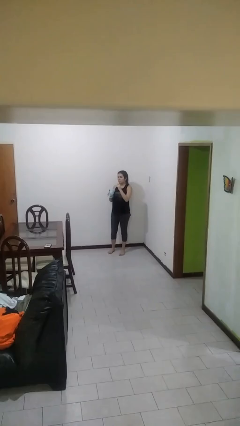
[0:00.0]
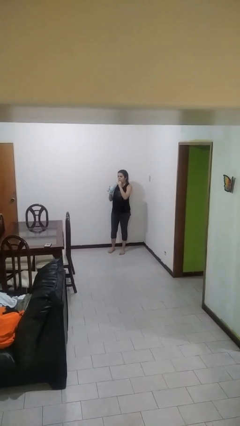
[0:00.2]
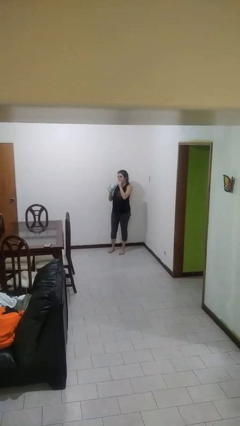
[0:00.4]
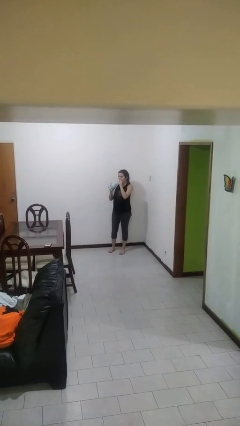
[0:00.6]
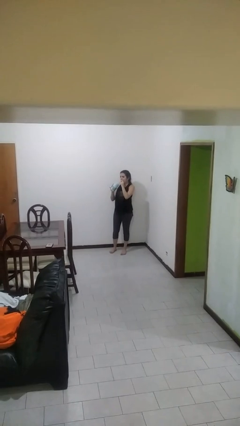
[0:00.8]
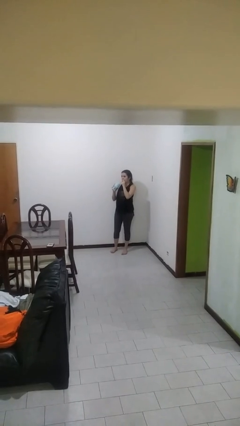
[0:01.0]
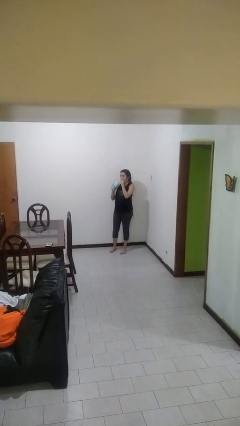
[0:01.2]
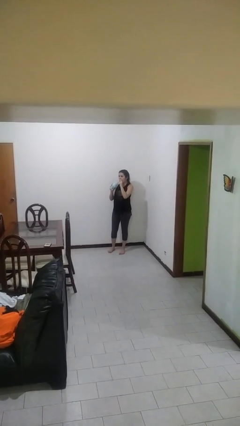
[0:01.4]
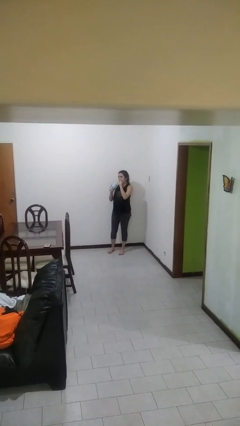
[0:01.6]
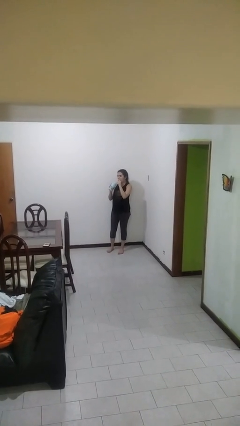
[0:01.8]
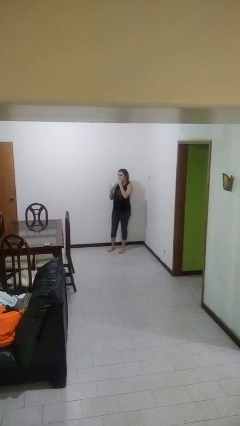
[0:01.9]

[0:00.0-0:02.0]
person drinks from straw

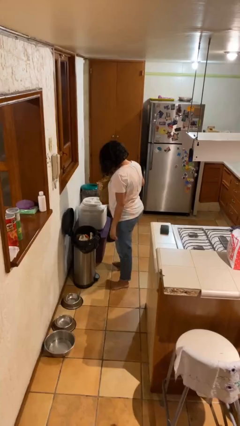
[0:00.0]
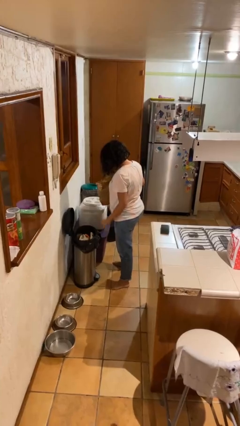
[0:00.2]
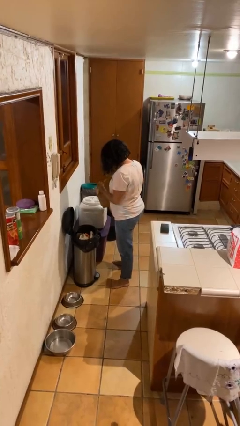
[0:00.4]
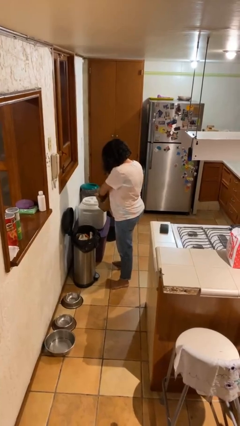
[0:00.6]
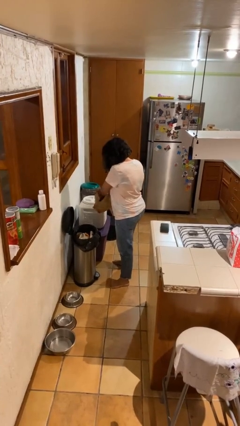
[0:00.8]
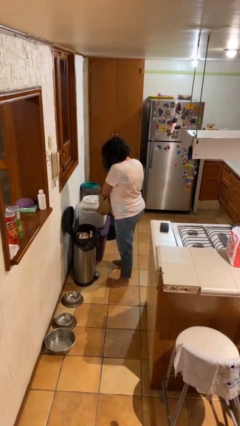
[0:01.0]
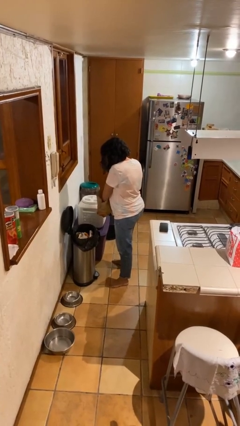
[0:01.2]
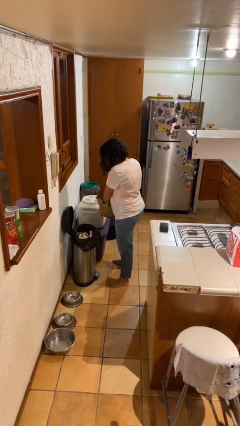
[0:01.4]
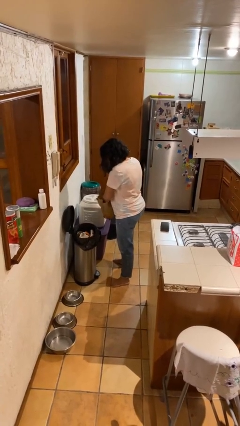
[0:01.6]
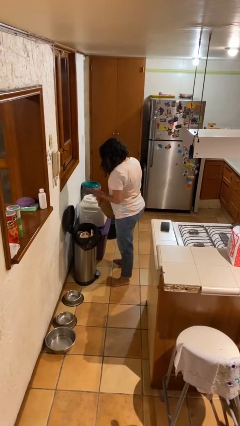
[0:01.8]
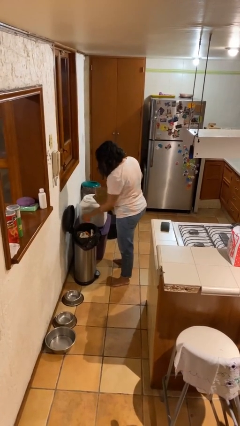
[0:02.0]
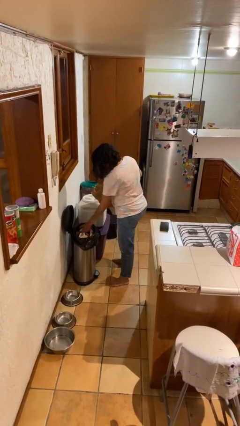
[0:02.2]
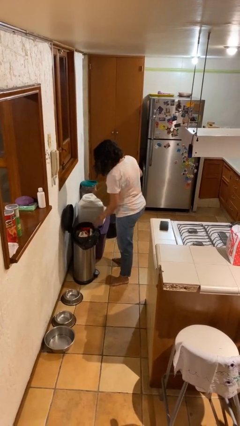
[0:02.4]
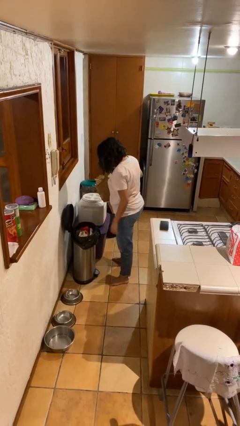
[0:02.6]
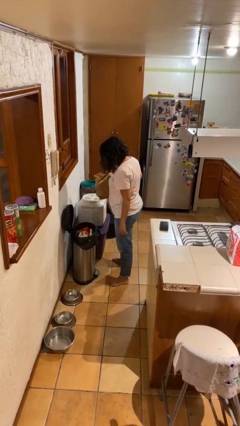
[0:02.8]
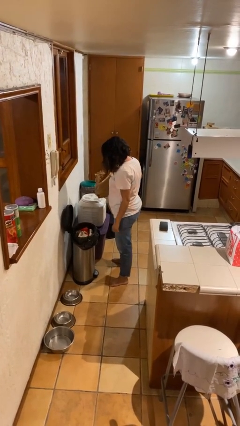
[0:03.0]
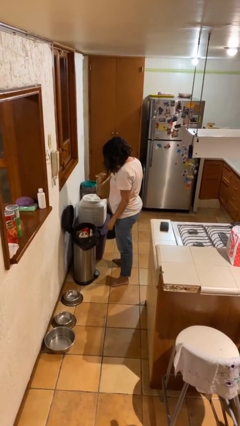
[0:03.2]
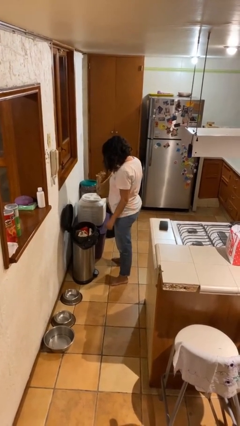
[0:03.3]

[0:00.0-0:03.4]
person discards trash

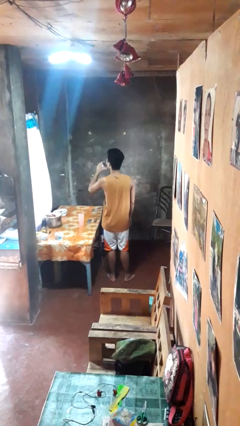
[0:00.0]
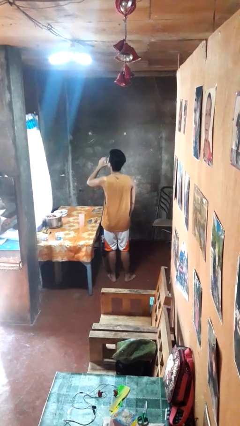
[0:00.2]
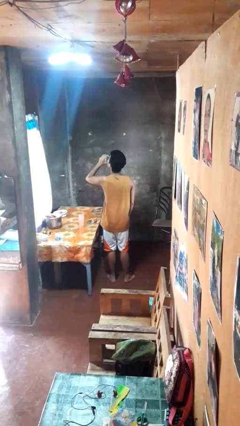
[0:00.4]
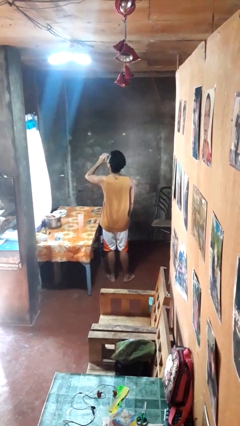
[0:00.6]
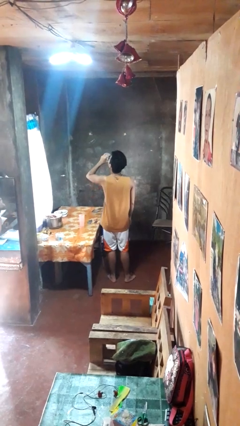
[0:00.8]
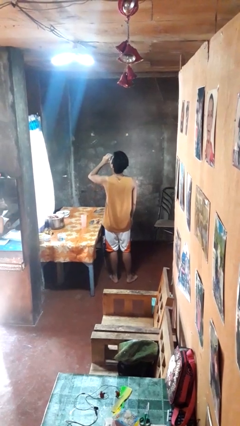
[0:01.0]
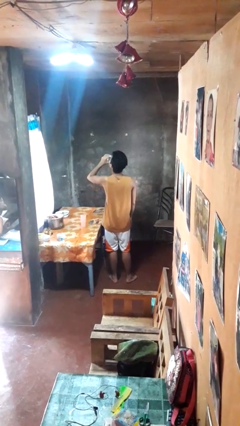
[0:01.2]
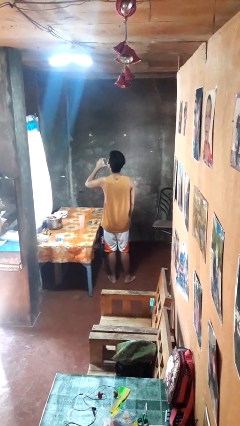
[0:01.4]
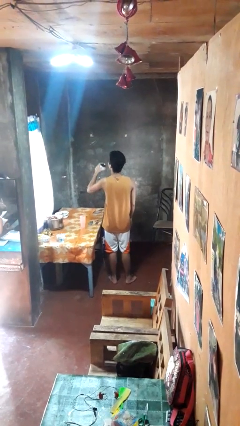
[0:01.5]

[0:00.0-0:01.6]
person drinks from beverage can

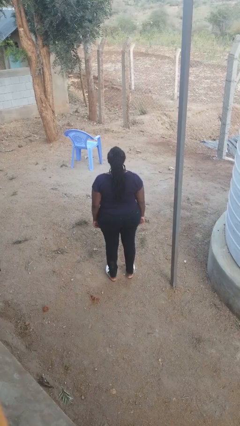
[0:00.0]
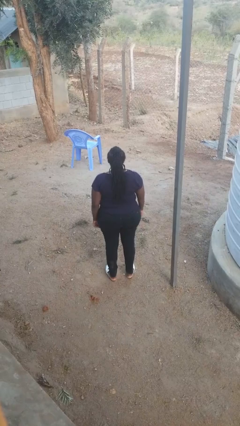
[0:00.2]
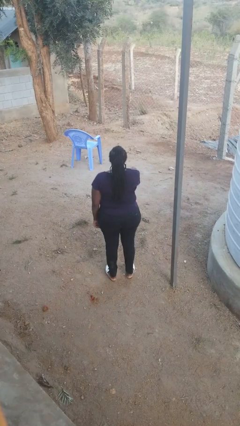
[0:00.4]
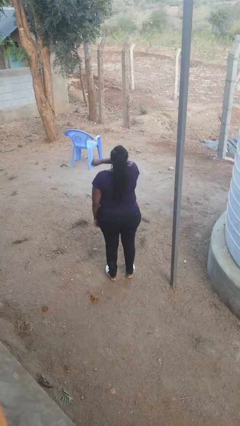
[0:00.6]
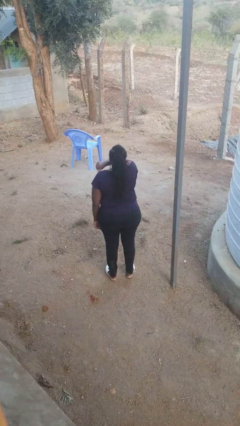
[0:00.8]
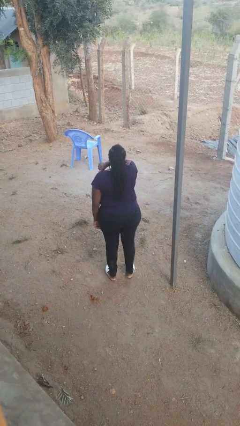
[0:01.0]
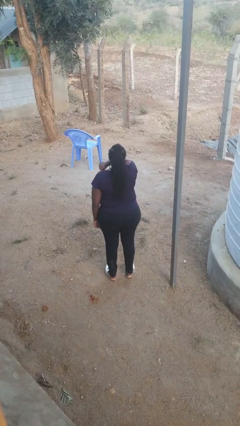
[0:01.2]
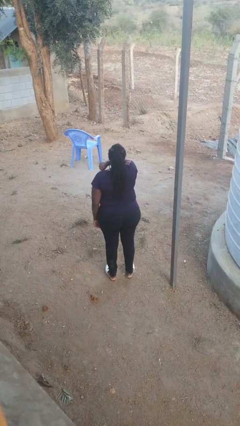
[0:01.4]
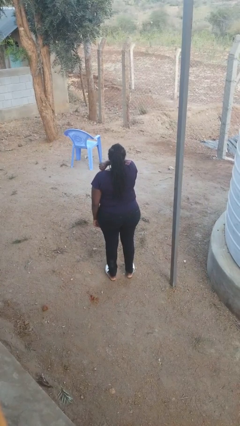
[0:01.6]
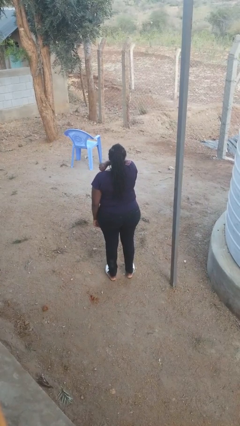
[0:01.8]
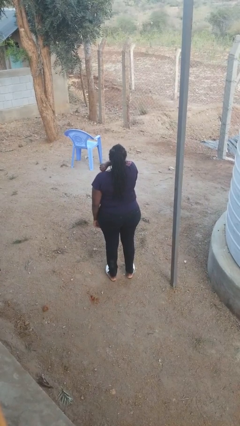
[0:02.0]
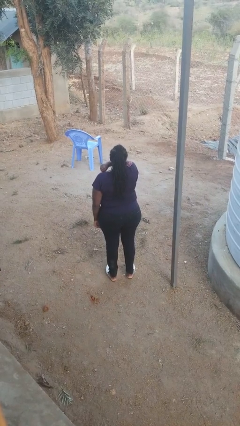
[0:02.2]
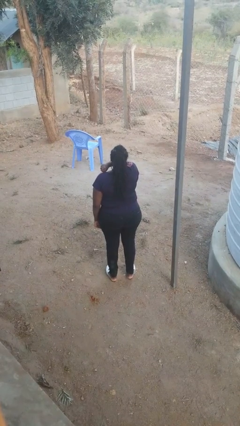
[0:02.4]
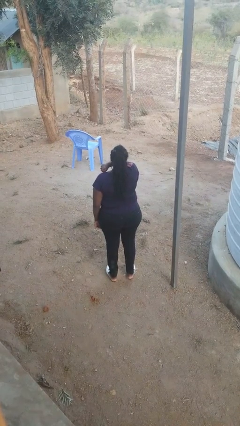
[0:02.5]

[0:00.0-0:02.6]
person sneezes into arm

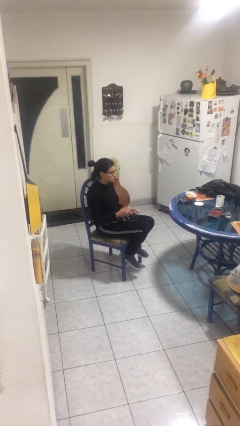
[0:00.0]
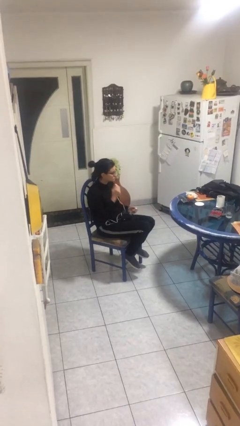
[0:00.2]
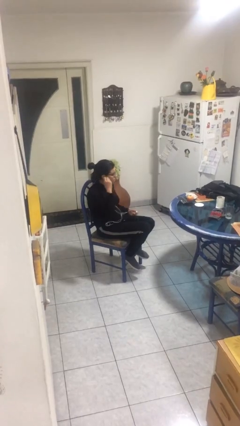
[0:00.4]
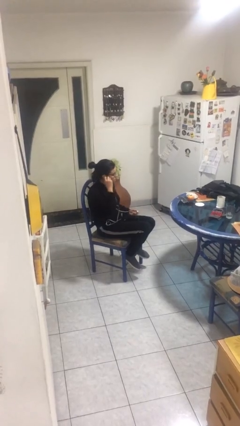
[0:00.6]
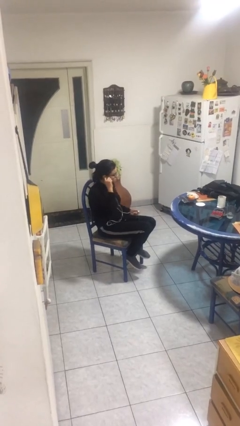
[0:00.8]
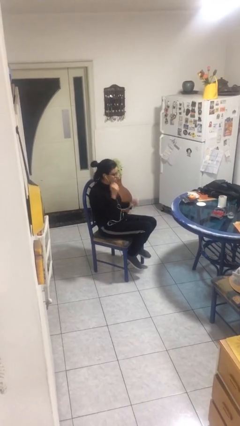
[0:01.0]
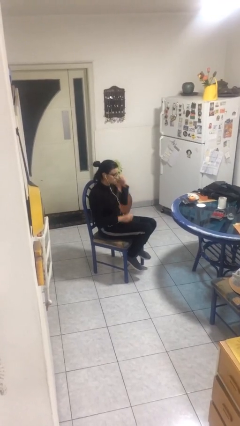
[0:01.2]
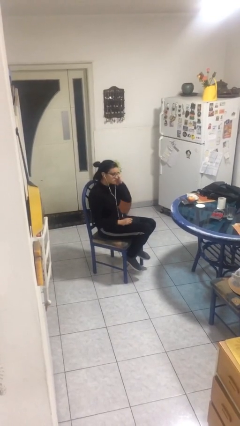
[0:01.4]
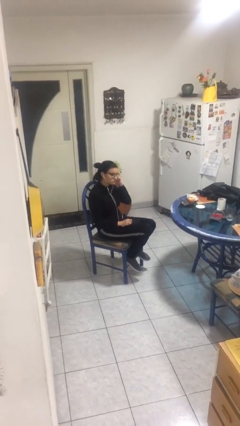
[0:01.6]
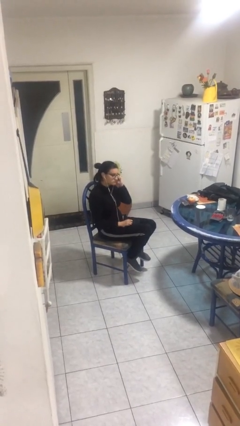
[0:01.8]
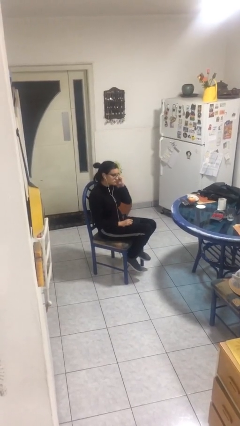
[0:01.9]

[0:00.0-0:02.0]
person puts on headphones

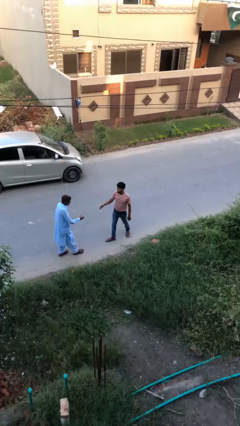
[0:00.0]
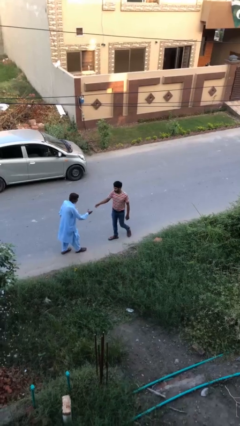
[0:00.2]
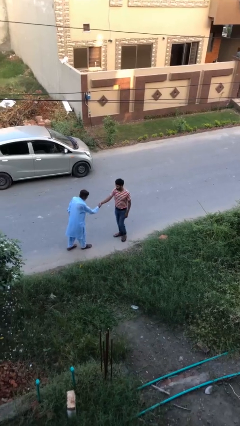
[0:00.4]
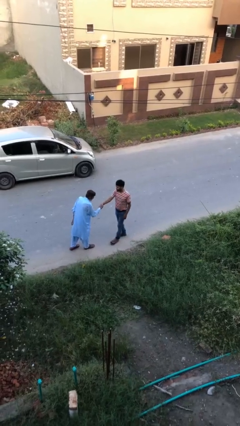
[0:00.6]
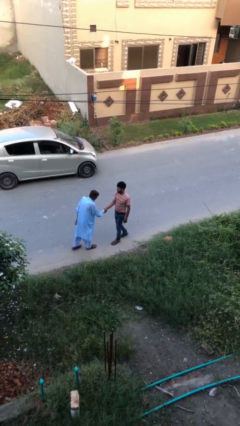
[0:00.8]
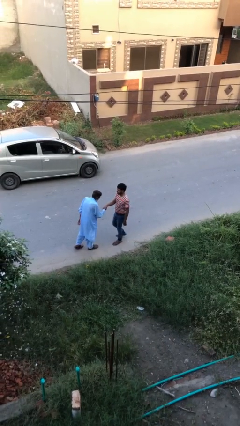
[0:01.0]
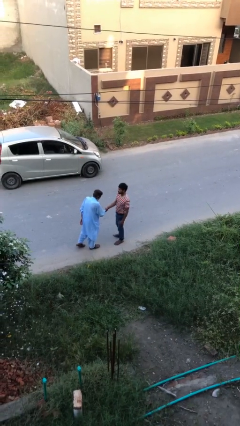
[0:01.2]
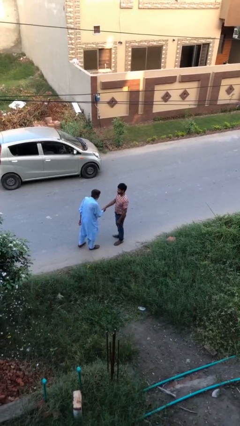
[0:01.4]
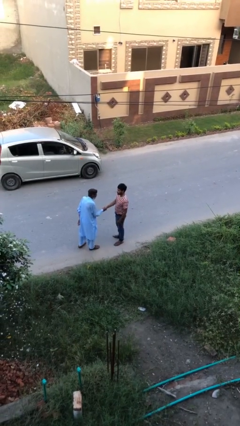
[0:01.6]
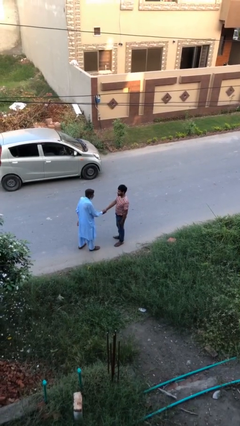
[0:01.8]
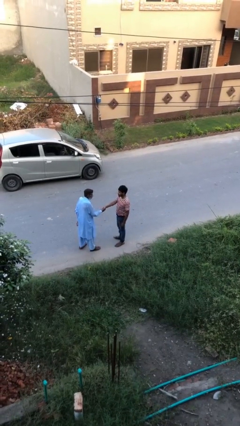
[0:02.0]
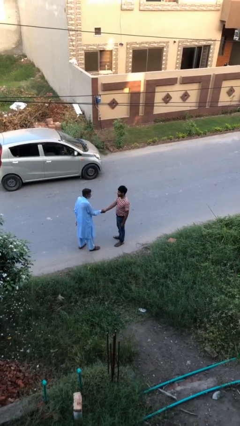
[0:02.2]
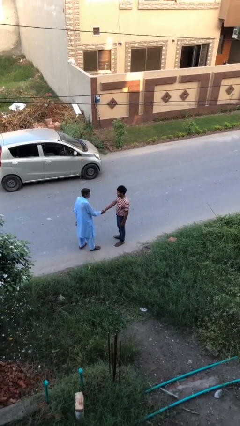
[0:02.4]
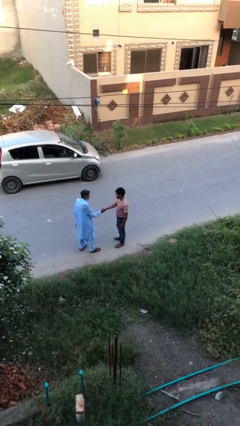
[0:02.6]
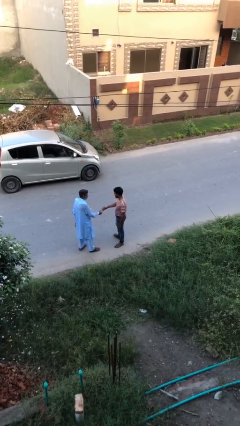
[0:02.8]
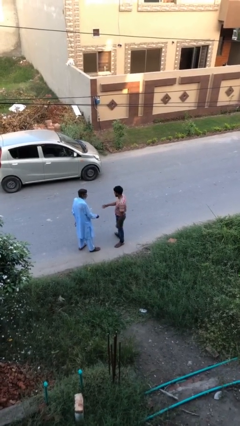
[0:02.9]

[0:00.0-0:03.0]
person shakes hand

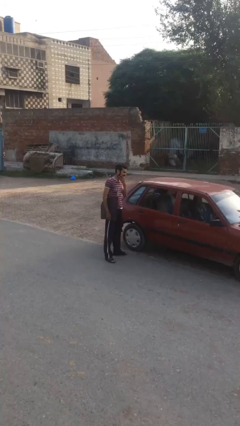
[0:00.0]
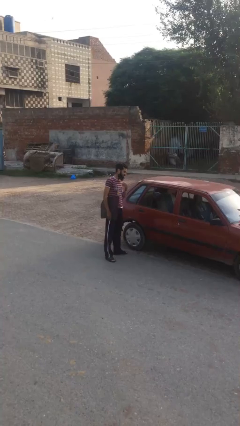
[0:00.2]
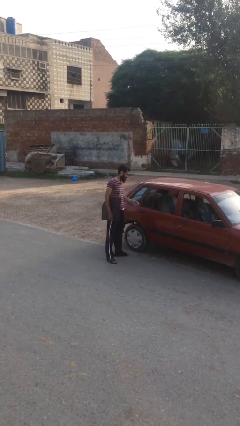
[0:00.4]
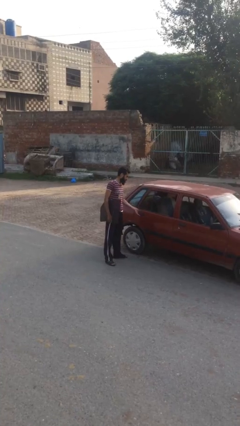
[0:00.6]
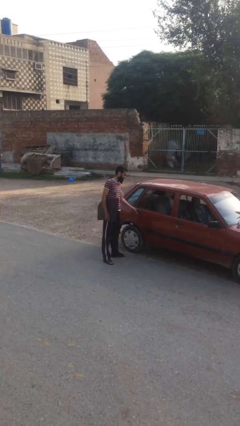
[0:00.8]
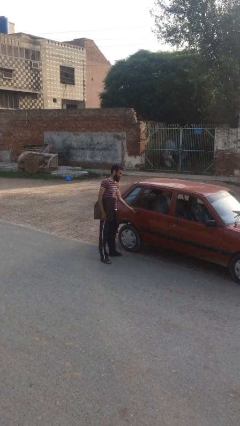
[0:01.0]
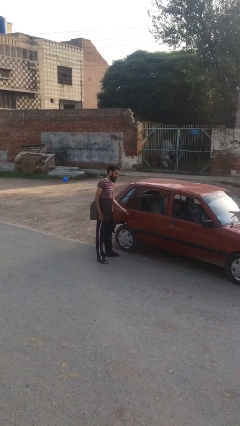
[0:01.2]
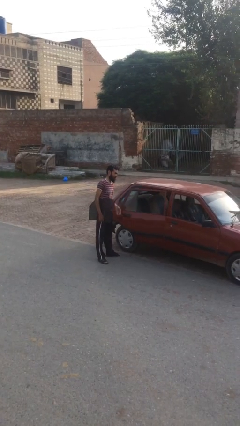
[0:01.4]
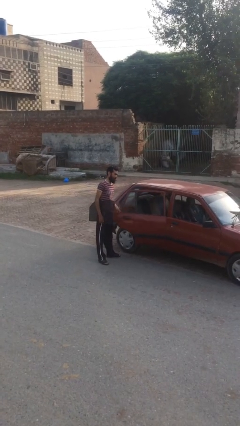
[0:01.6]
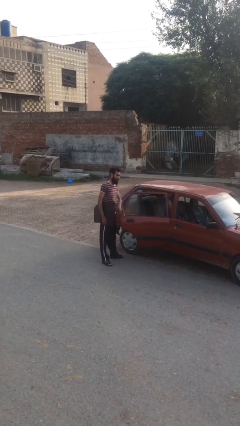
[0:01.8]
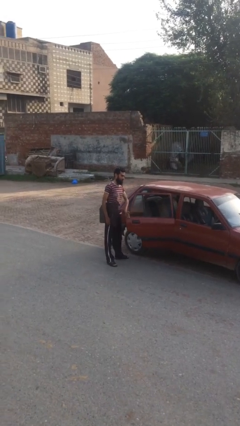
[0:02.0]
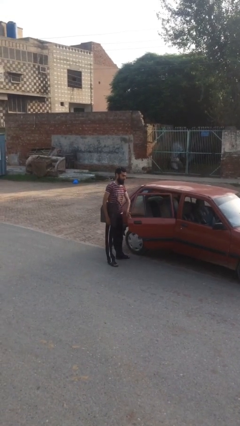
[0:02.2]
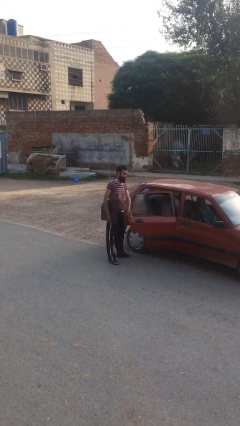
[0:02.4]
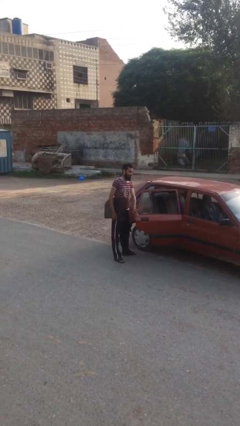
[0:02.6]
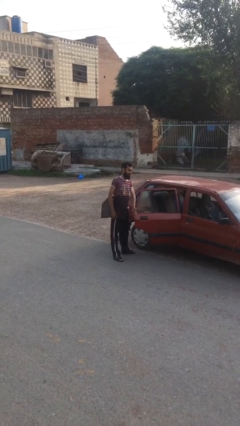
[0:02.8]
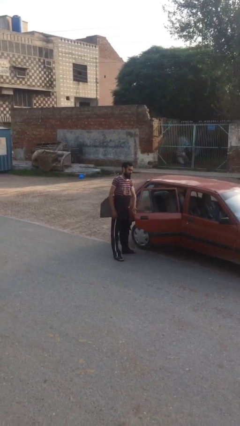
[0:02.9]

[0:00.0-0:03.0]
person opens car door
